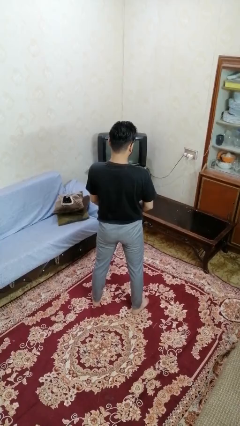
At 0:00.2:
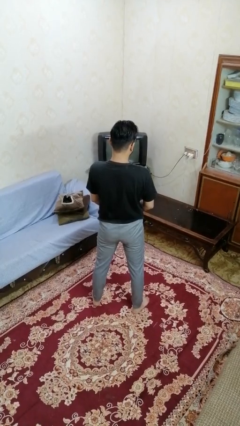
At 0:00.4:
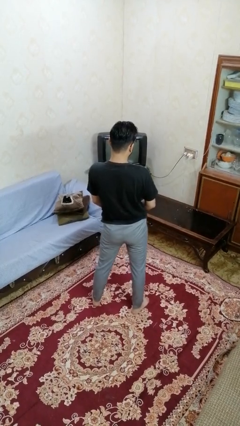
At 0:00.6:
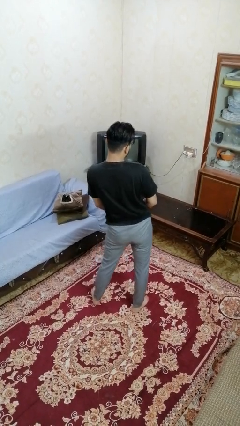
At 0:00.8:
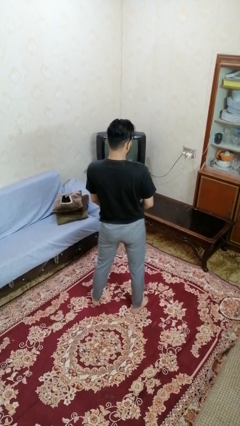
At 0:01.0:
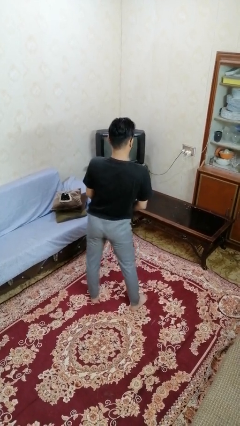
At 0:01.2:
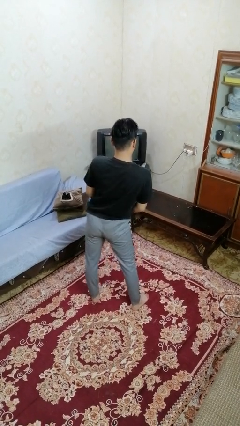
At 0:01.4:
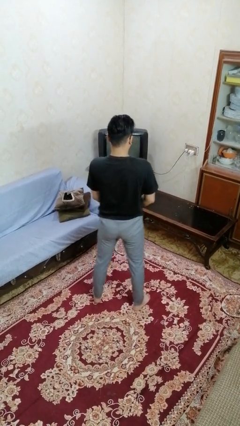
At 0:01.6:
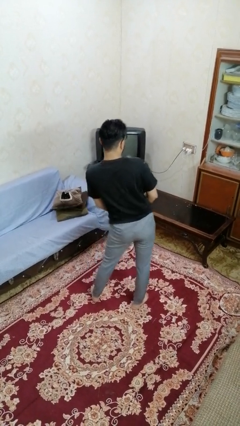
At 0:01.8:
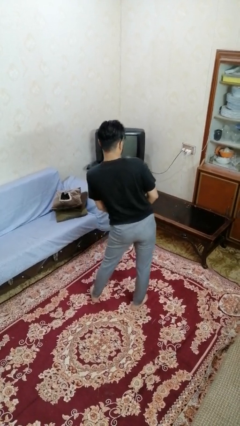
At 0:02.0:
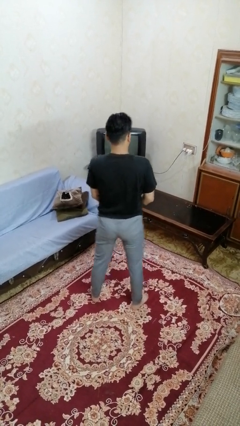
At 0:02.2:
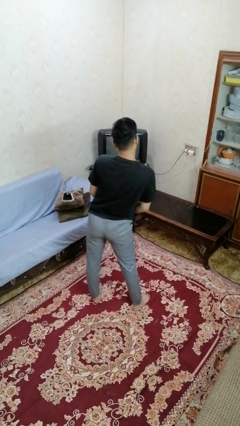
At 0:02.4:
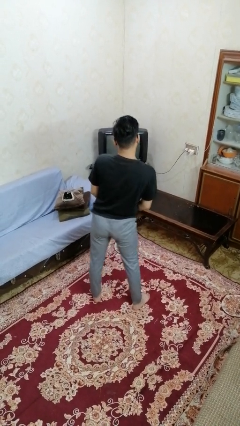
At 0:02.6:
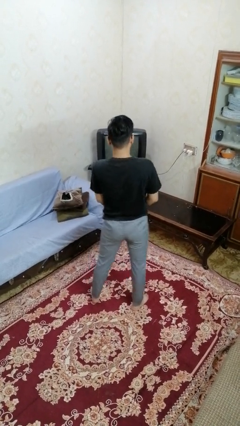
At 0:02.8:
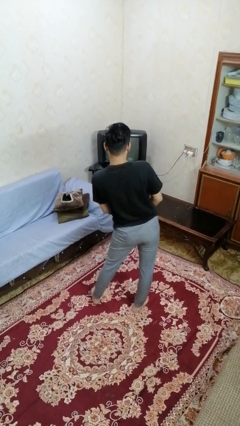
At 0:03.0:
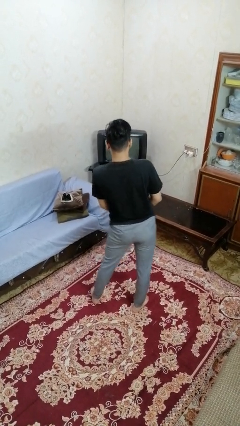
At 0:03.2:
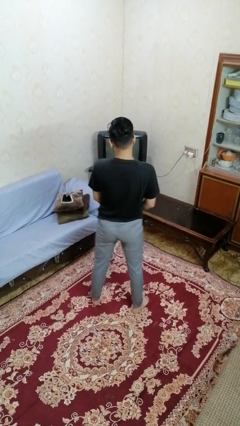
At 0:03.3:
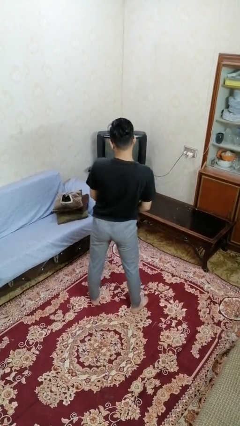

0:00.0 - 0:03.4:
person wiggles hips

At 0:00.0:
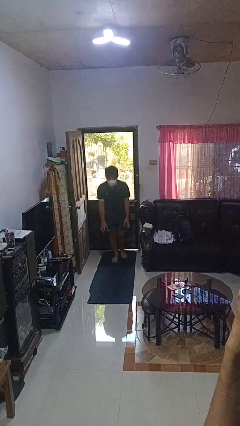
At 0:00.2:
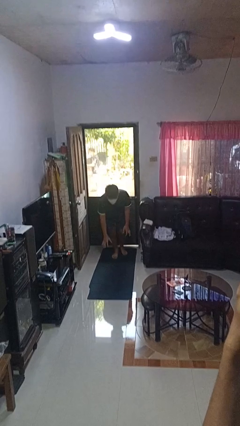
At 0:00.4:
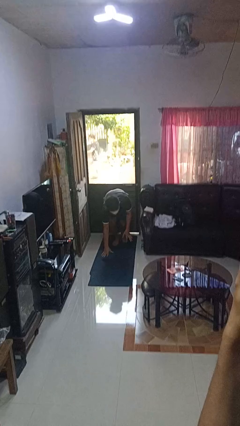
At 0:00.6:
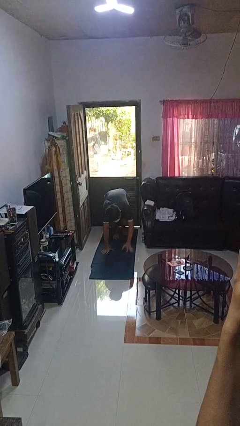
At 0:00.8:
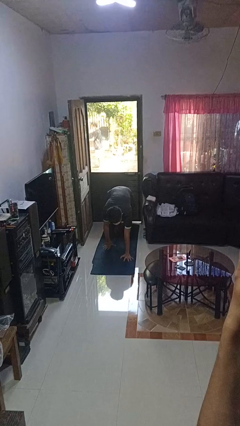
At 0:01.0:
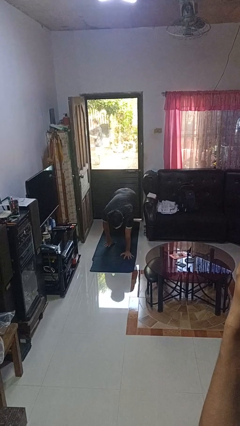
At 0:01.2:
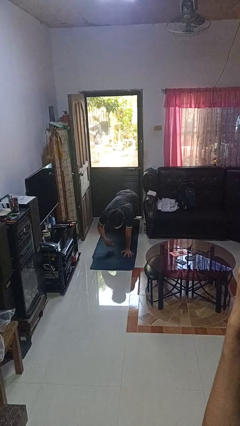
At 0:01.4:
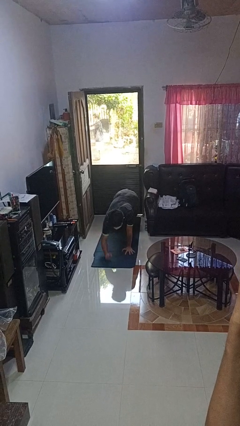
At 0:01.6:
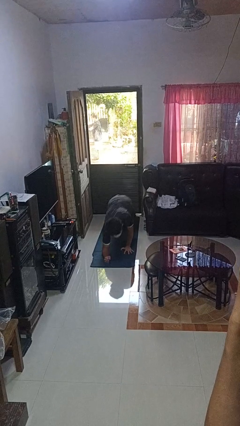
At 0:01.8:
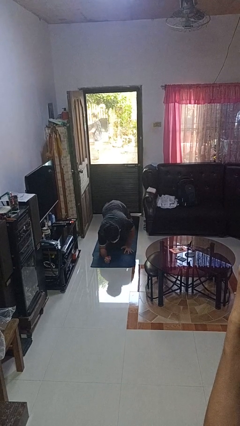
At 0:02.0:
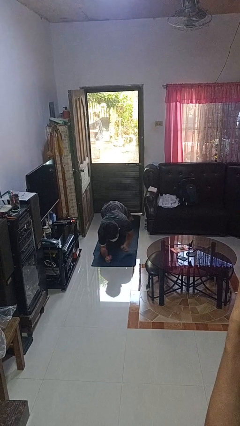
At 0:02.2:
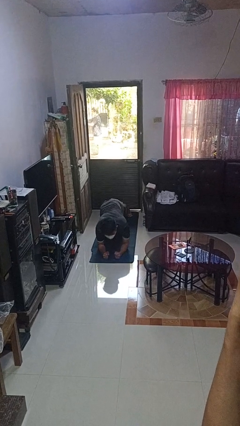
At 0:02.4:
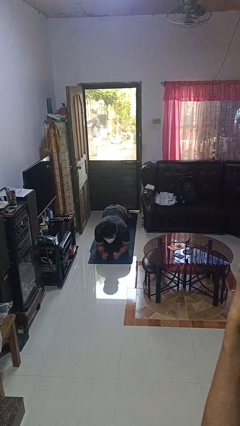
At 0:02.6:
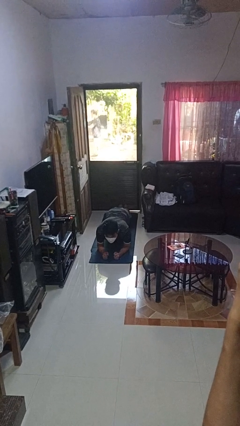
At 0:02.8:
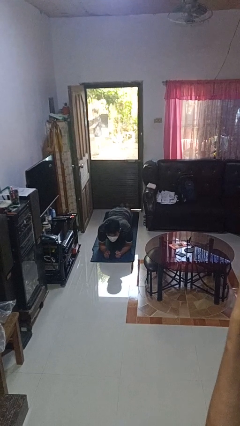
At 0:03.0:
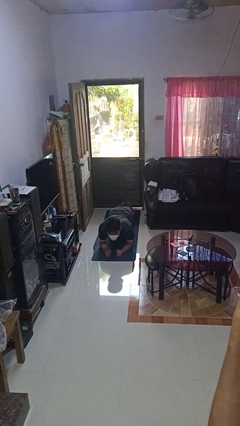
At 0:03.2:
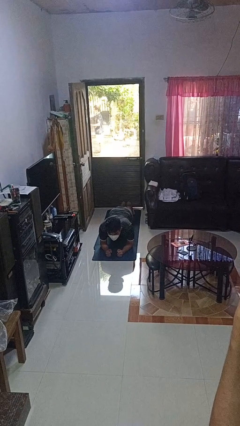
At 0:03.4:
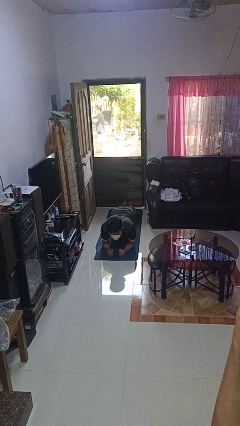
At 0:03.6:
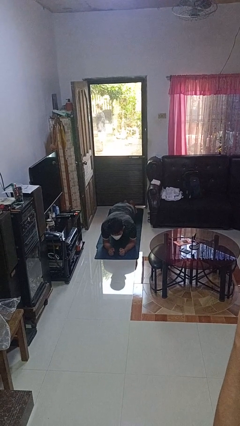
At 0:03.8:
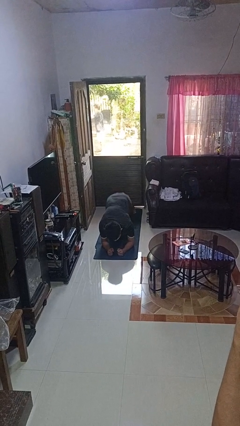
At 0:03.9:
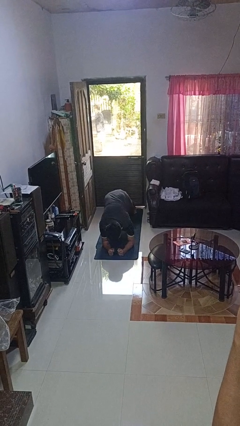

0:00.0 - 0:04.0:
person exercises with plank

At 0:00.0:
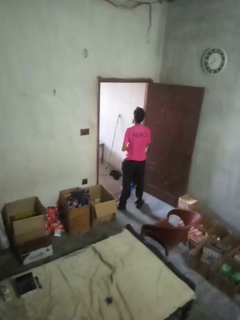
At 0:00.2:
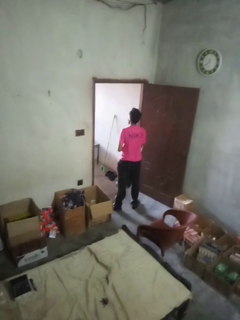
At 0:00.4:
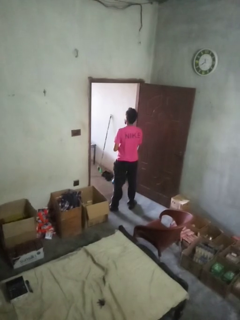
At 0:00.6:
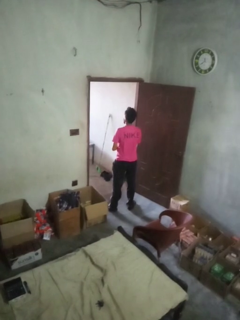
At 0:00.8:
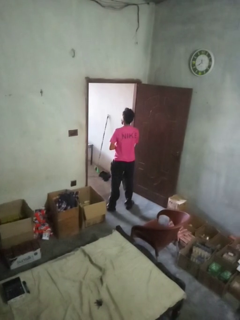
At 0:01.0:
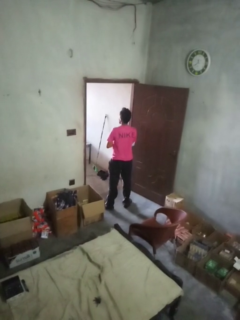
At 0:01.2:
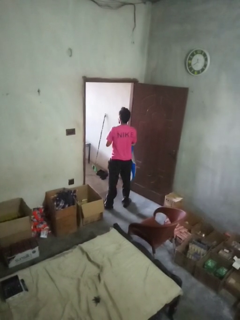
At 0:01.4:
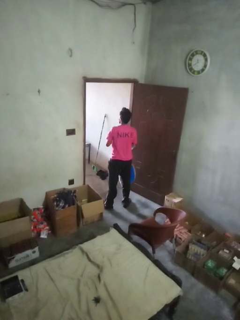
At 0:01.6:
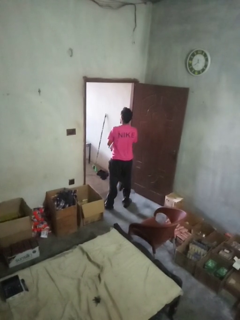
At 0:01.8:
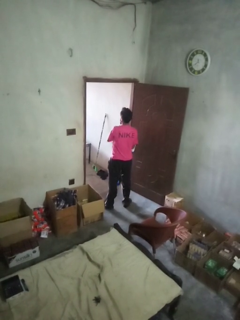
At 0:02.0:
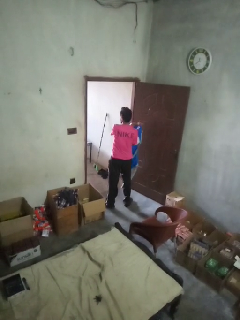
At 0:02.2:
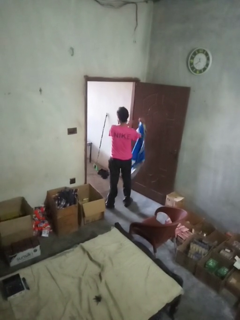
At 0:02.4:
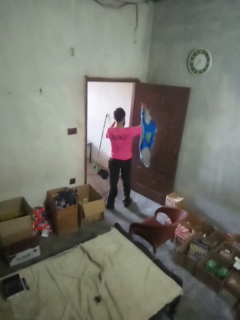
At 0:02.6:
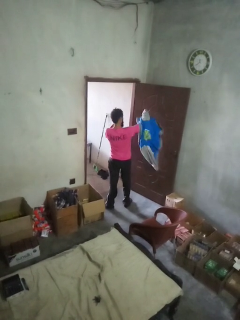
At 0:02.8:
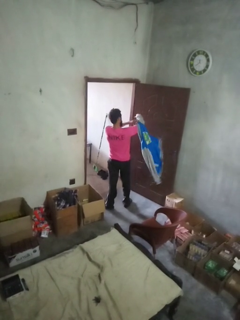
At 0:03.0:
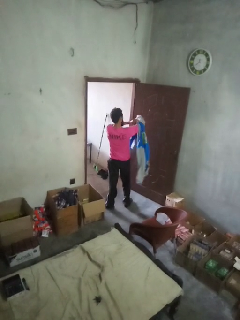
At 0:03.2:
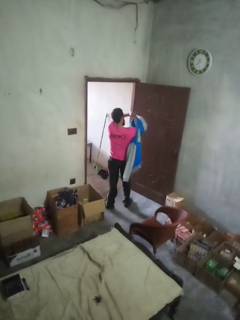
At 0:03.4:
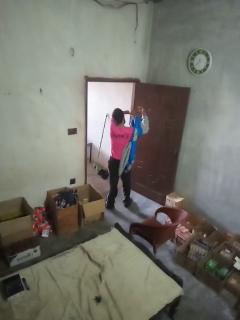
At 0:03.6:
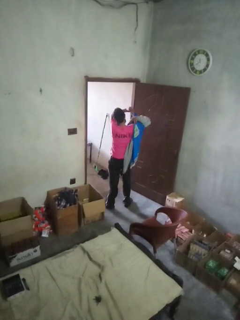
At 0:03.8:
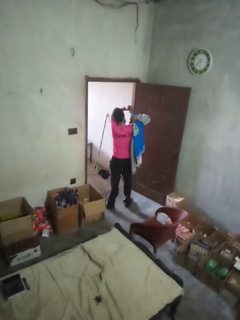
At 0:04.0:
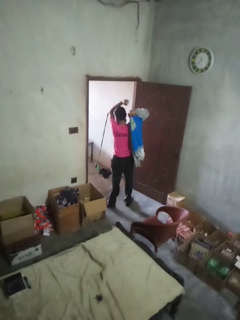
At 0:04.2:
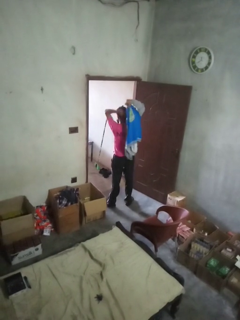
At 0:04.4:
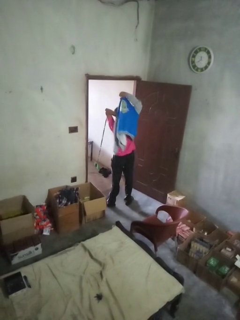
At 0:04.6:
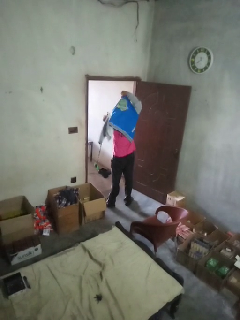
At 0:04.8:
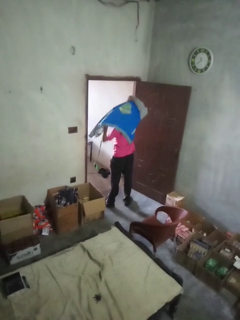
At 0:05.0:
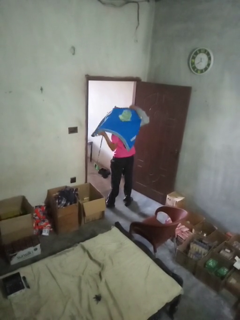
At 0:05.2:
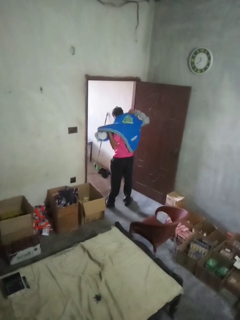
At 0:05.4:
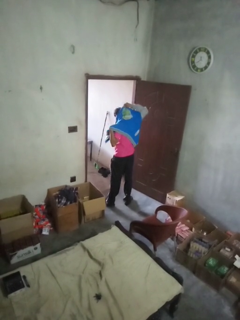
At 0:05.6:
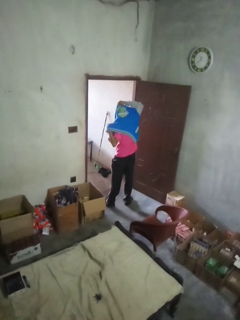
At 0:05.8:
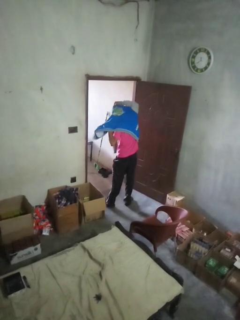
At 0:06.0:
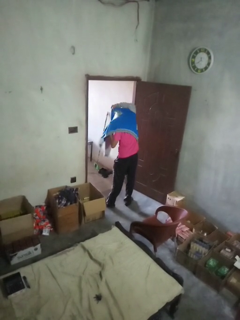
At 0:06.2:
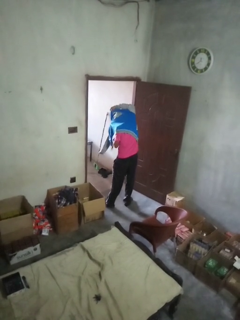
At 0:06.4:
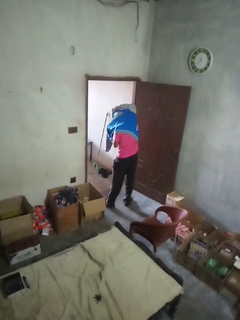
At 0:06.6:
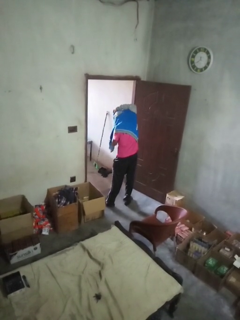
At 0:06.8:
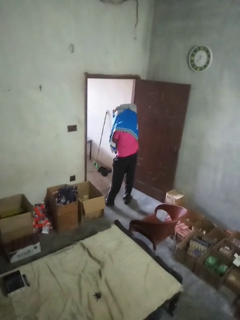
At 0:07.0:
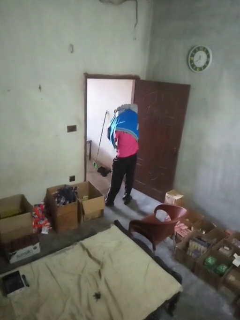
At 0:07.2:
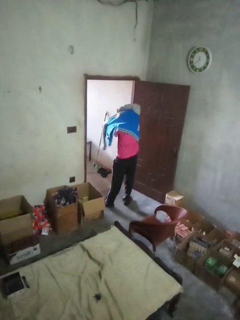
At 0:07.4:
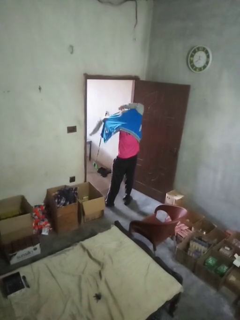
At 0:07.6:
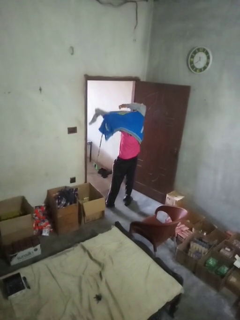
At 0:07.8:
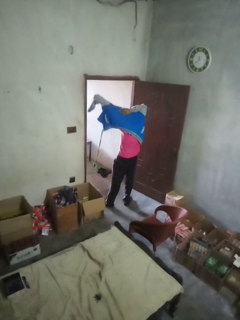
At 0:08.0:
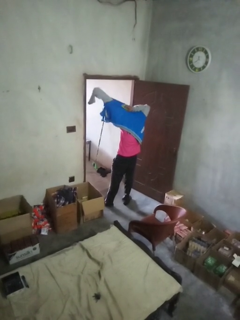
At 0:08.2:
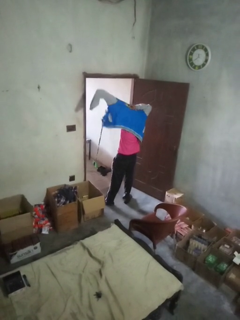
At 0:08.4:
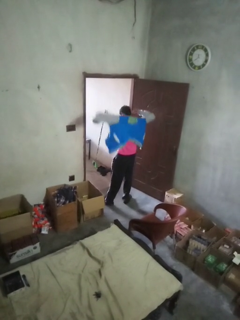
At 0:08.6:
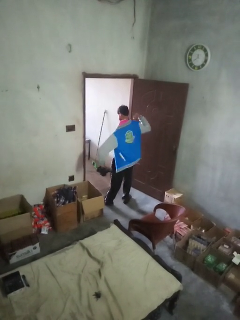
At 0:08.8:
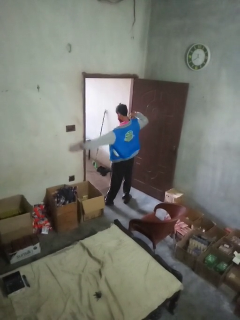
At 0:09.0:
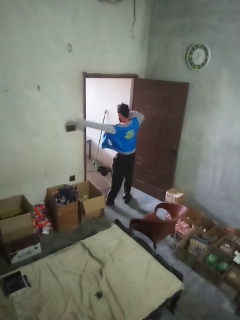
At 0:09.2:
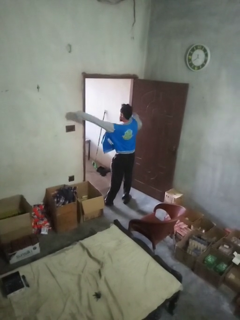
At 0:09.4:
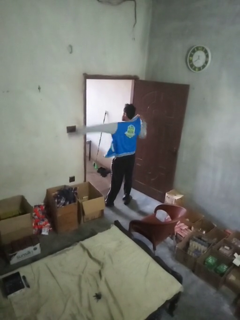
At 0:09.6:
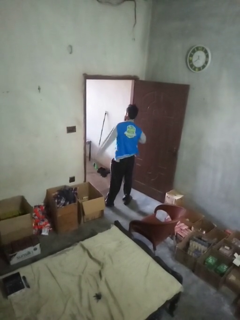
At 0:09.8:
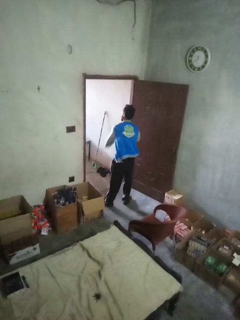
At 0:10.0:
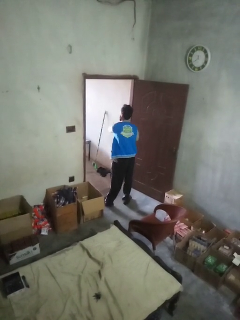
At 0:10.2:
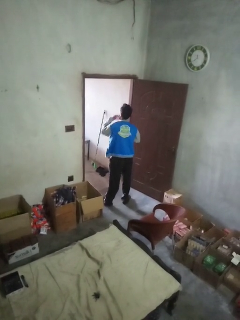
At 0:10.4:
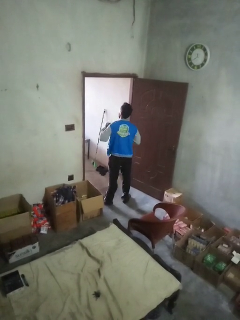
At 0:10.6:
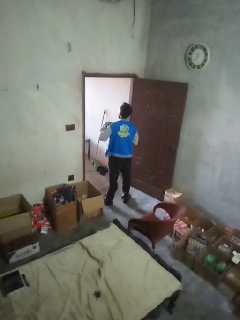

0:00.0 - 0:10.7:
person puts on jacket

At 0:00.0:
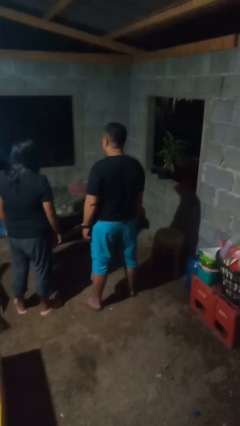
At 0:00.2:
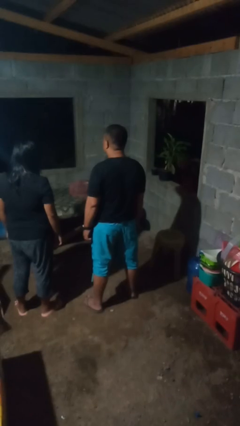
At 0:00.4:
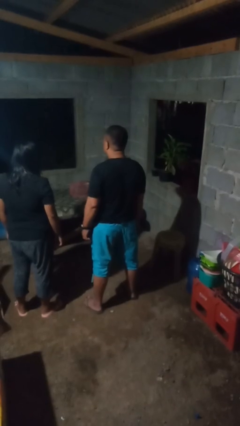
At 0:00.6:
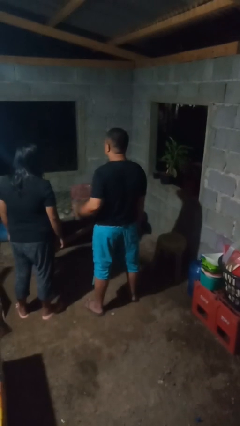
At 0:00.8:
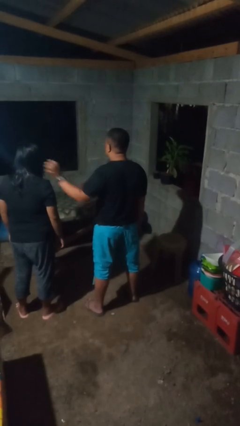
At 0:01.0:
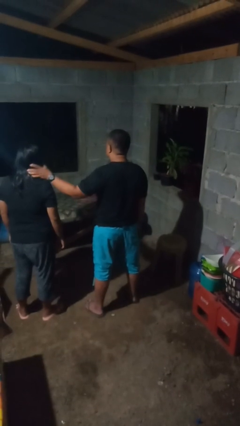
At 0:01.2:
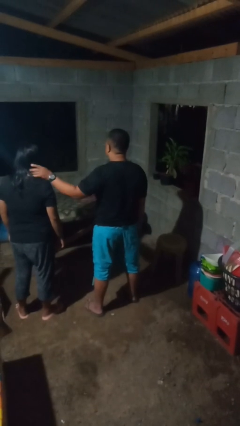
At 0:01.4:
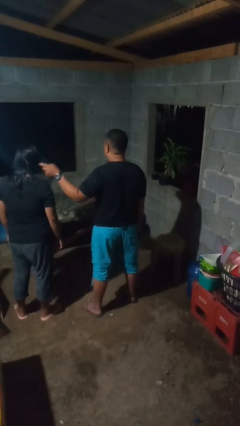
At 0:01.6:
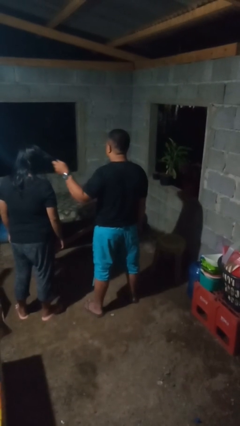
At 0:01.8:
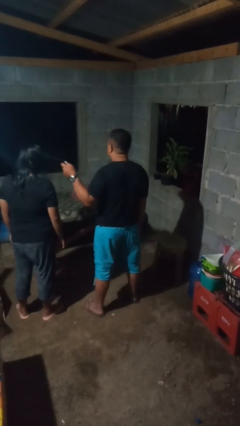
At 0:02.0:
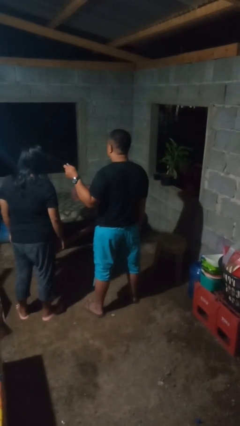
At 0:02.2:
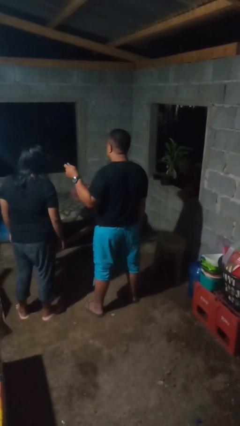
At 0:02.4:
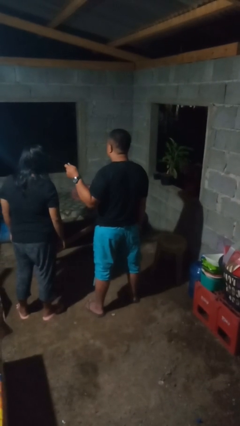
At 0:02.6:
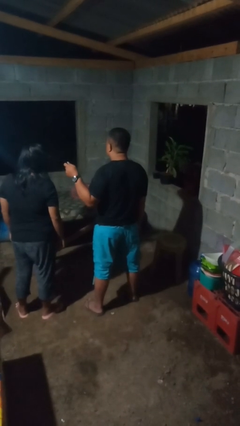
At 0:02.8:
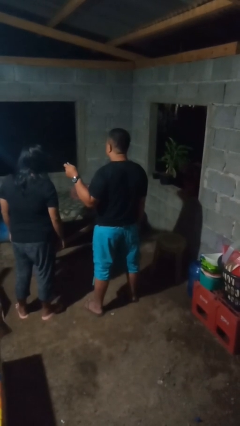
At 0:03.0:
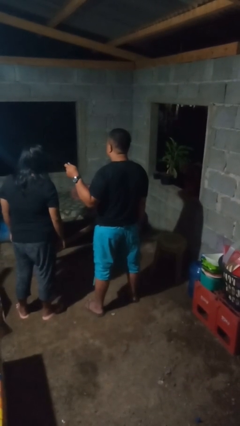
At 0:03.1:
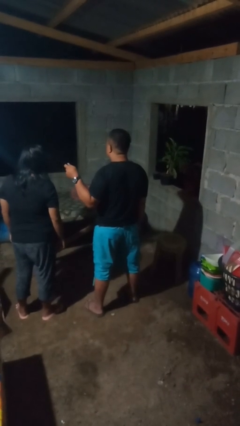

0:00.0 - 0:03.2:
person grabs person by hair
